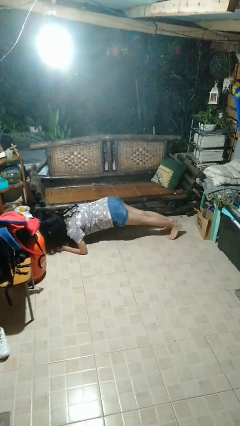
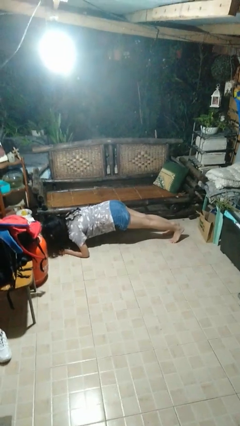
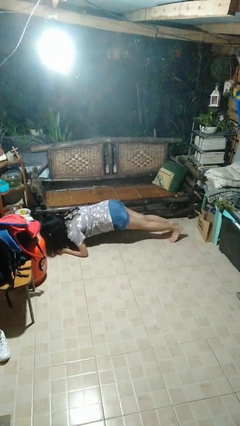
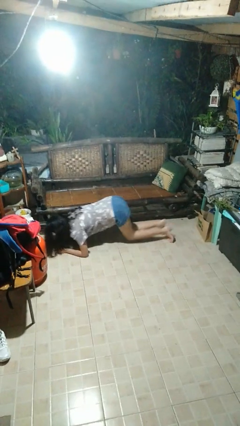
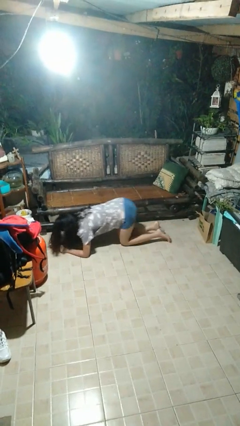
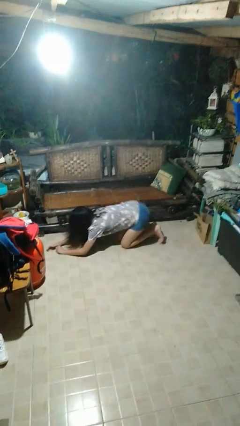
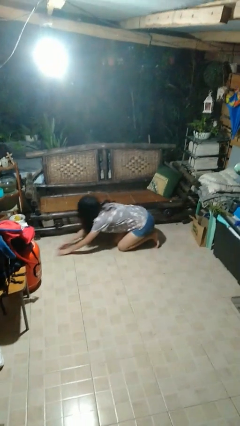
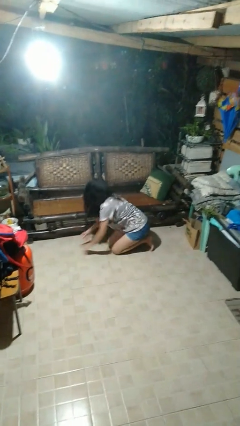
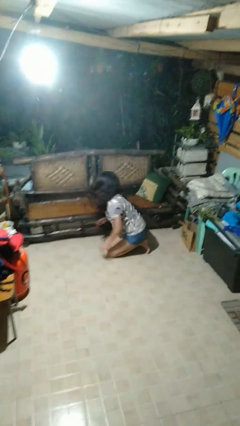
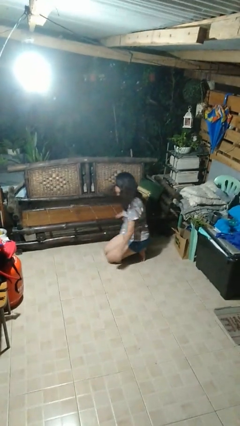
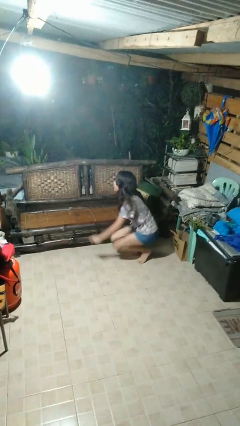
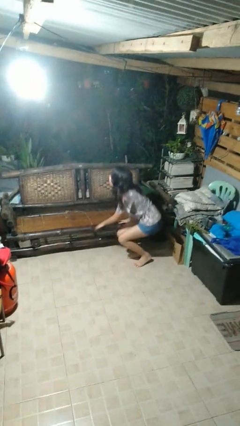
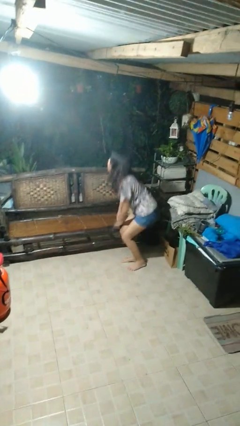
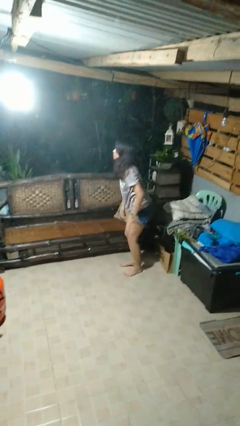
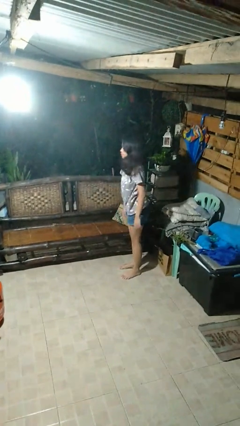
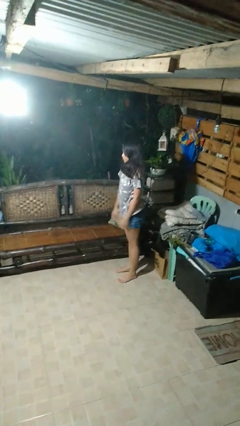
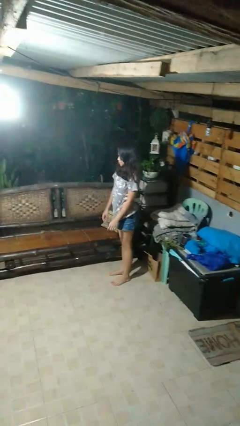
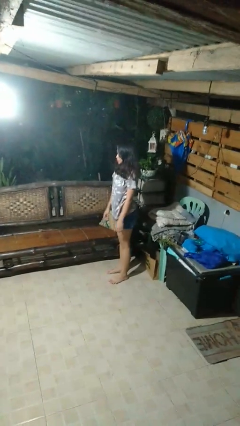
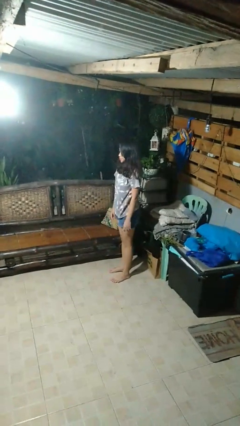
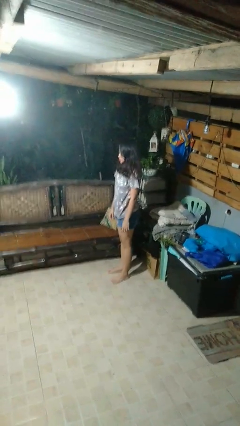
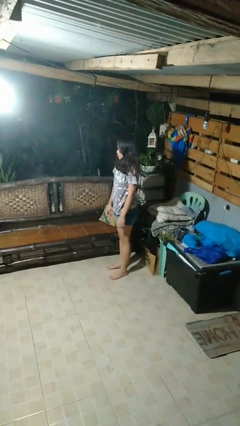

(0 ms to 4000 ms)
person stands up from floor

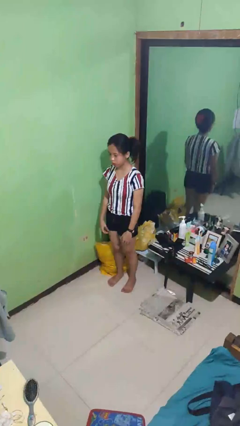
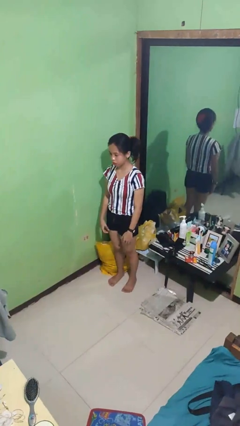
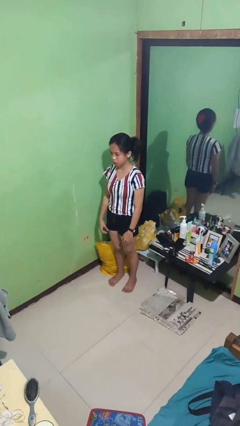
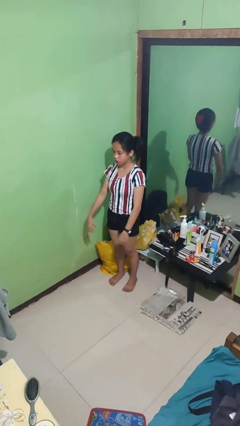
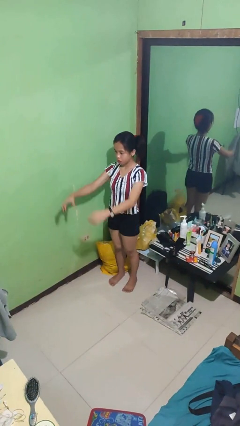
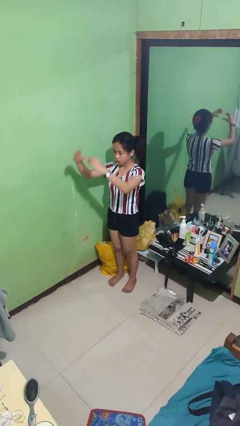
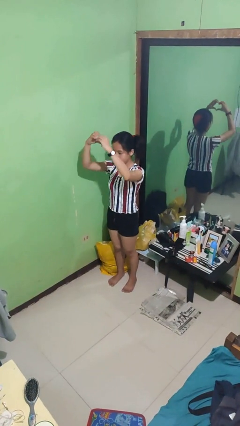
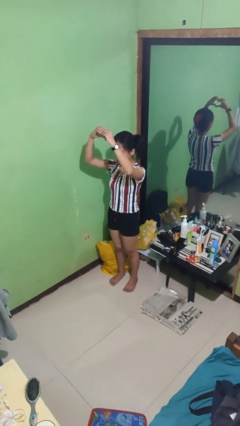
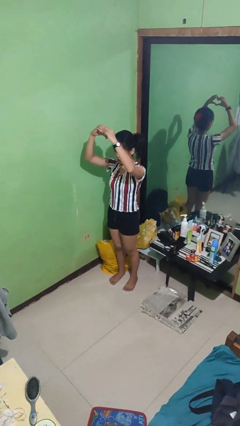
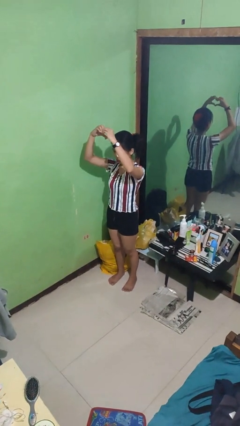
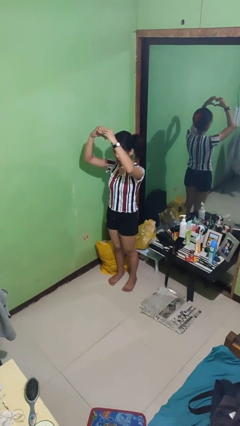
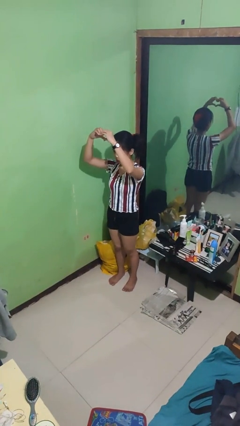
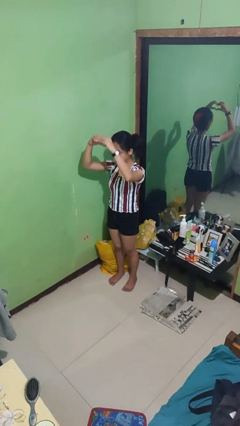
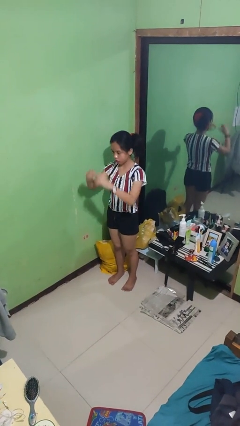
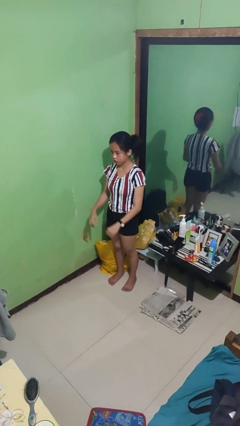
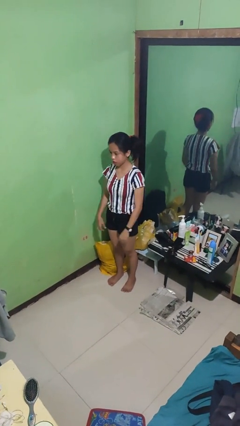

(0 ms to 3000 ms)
person gestures heart

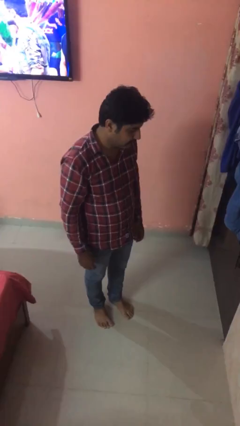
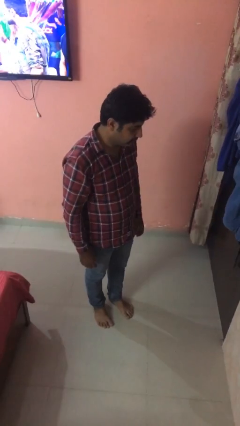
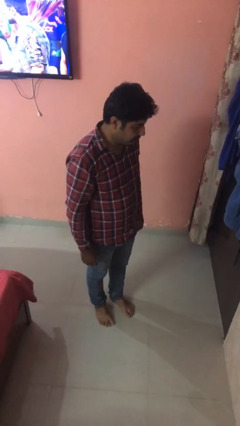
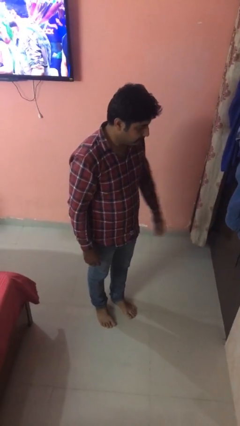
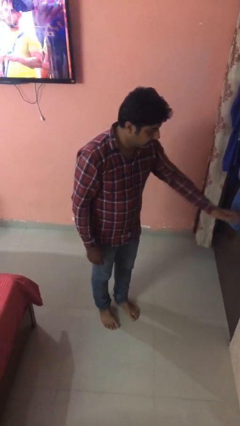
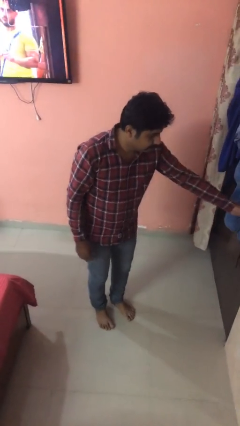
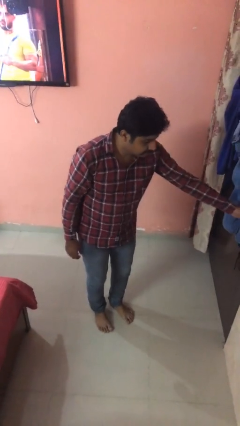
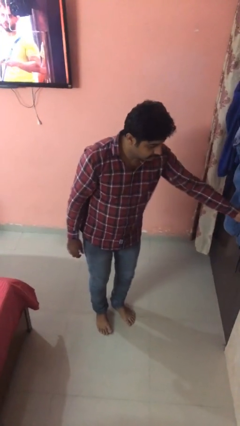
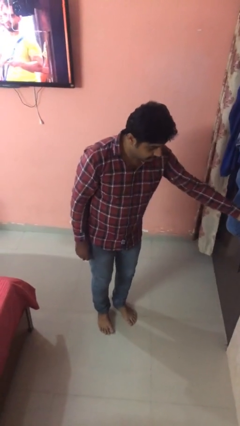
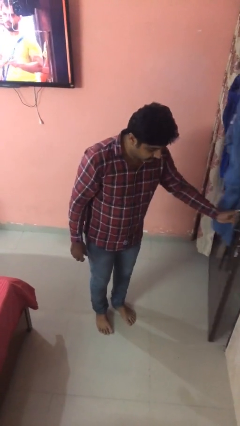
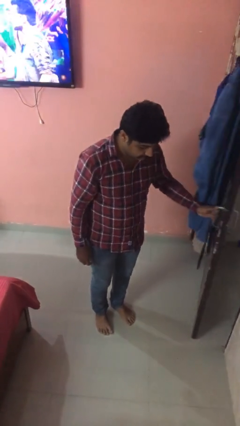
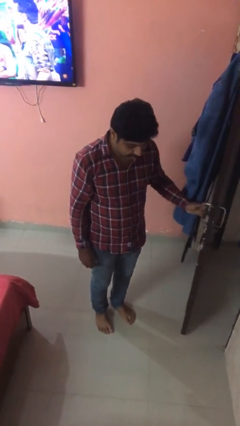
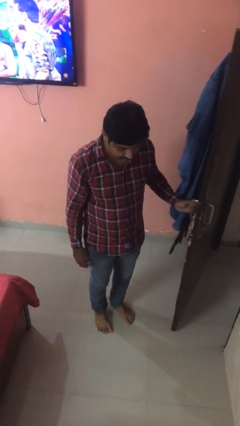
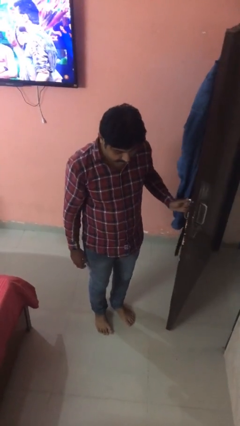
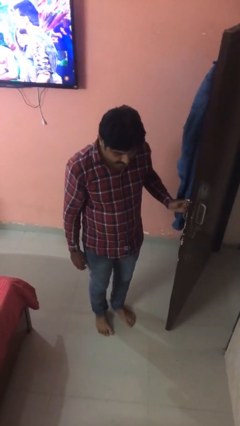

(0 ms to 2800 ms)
person opens facility door

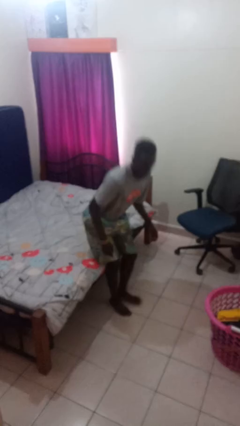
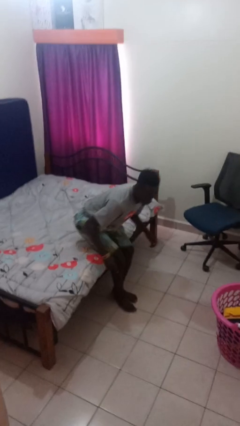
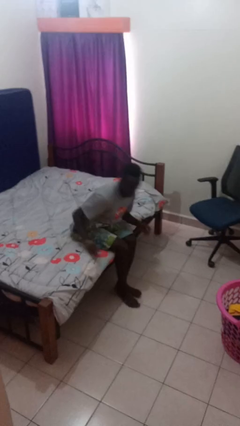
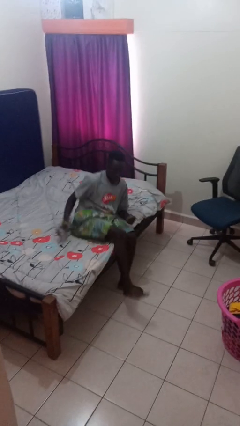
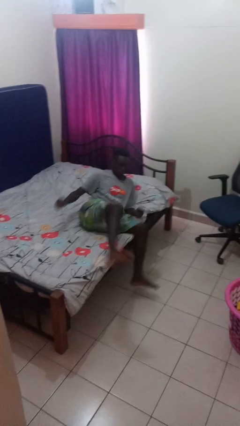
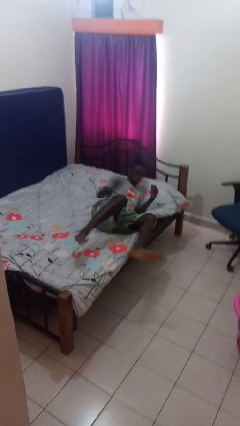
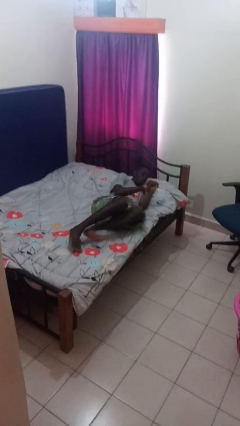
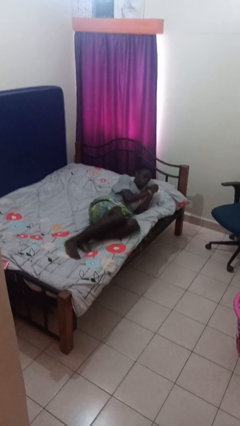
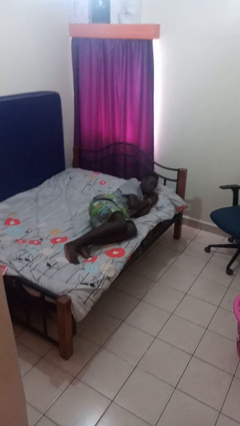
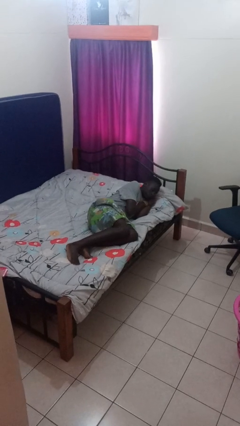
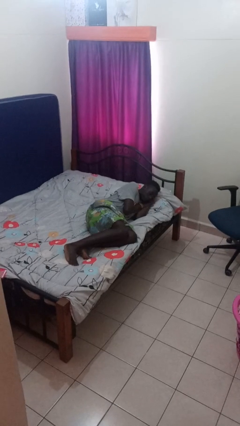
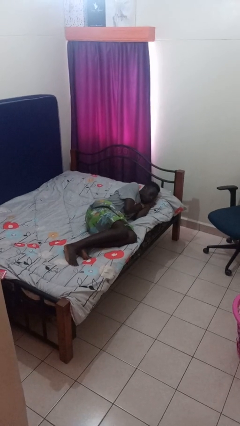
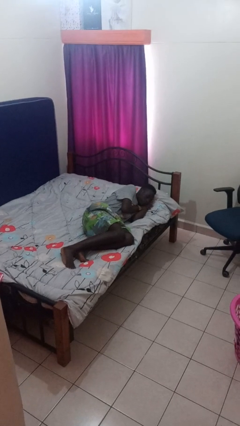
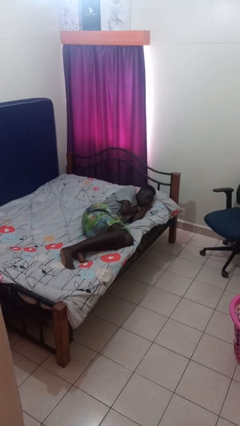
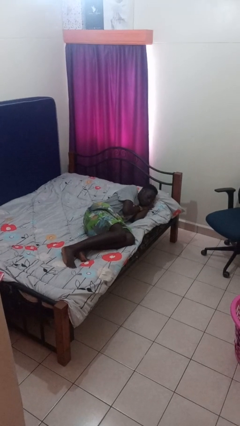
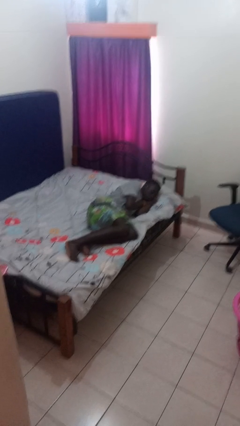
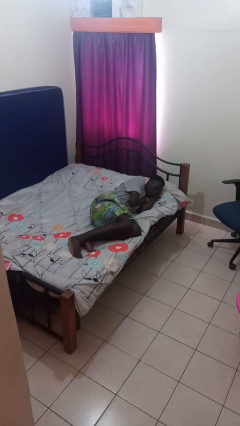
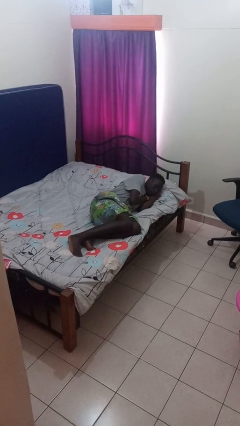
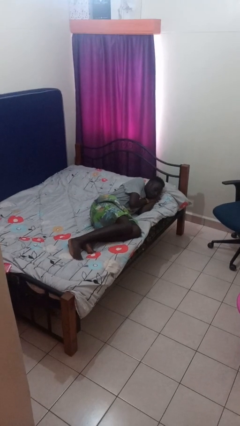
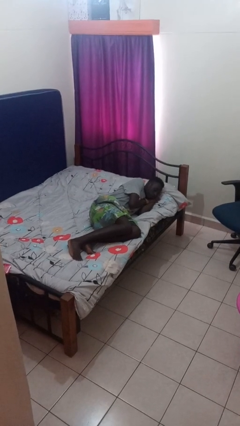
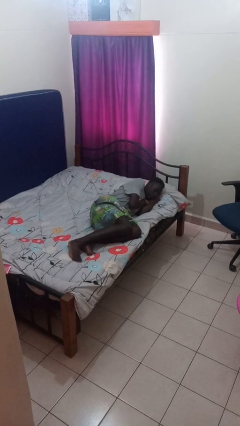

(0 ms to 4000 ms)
person lies down on bed

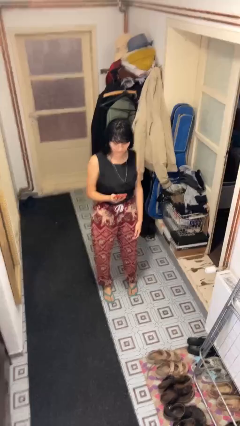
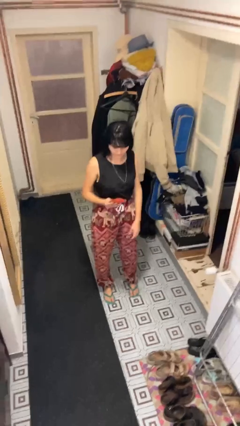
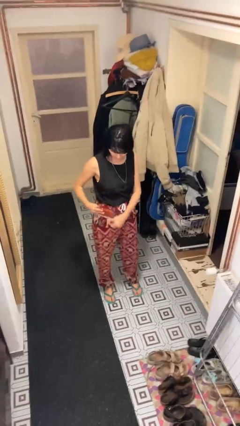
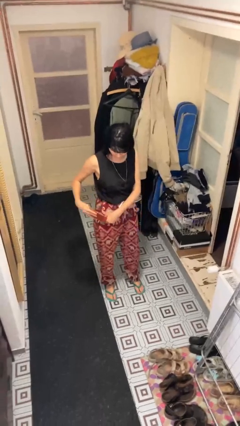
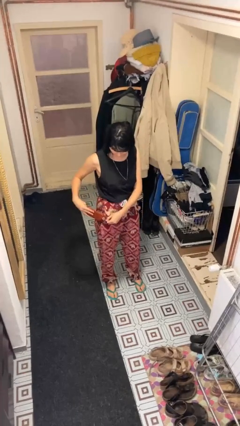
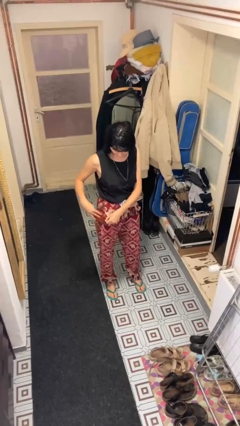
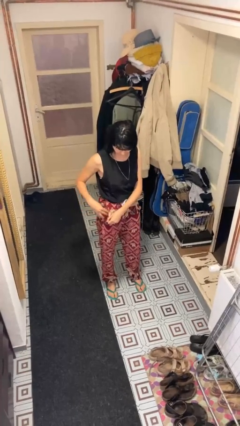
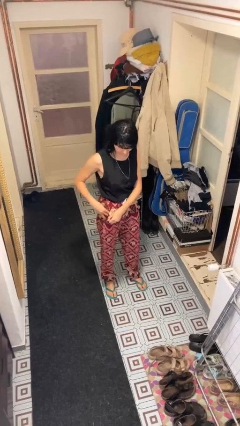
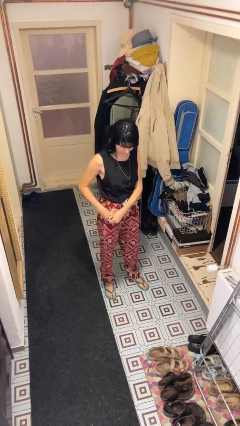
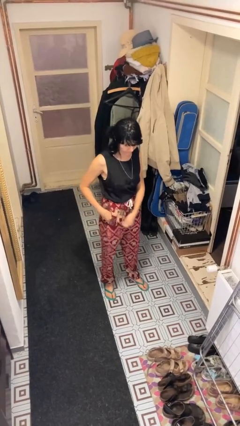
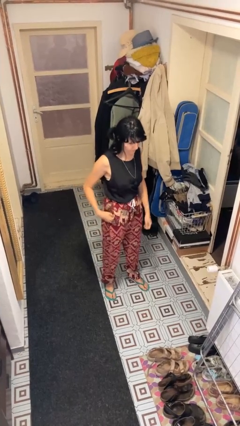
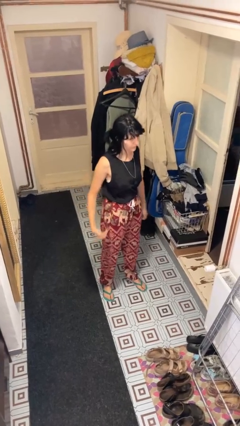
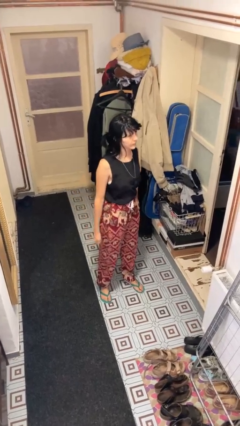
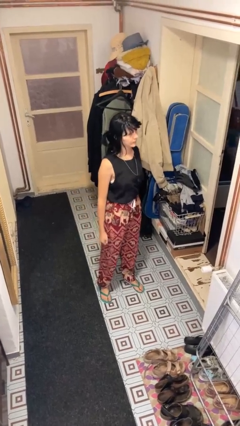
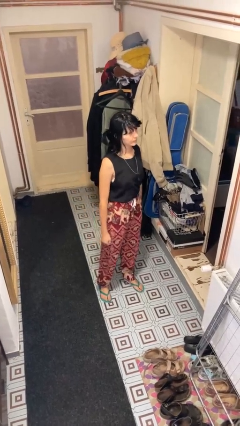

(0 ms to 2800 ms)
person puts phone into pocket

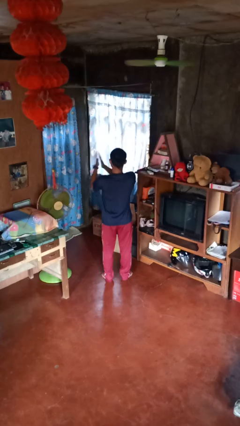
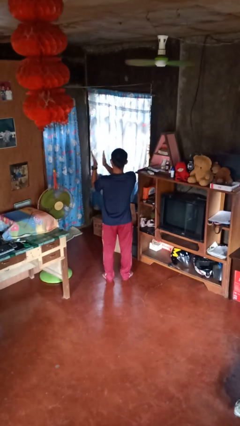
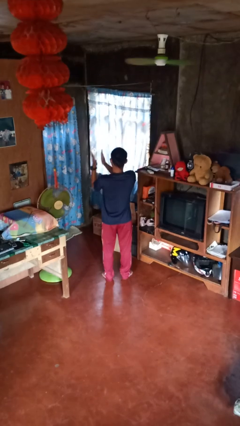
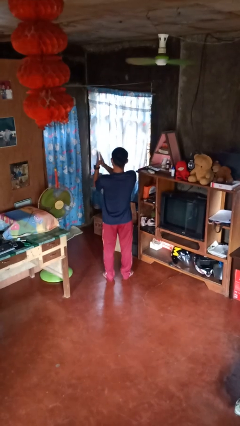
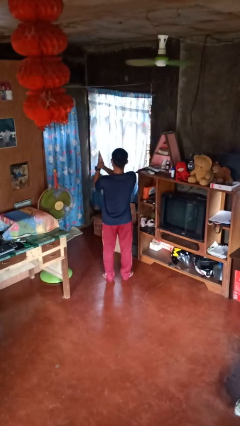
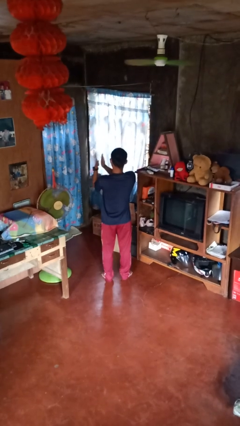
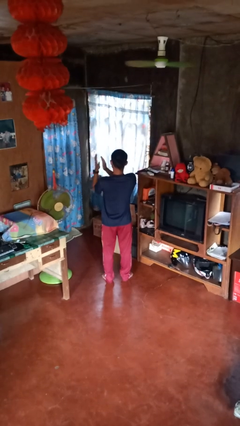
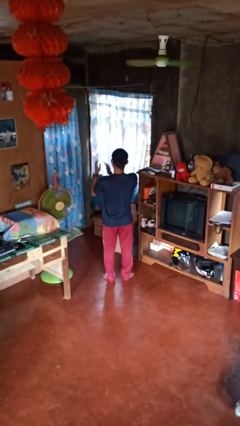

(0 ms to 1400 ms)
person claps hands
